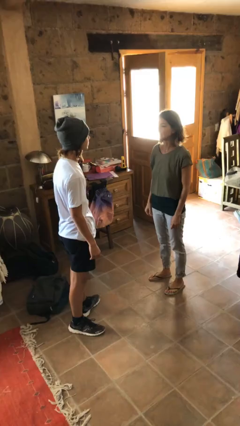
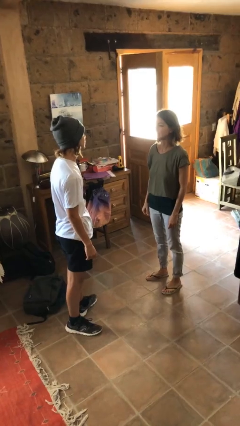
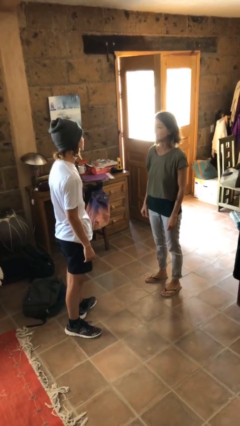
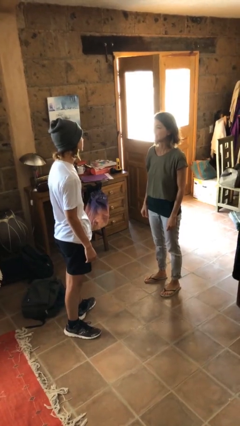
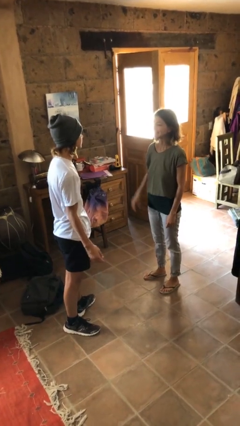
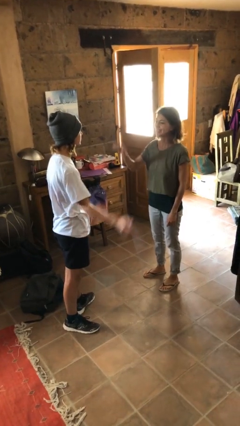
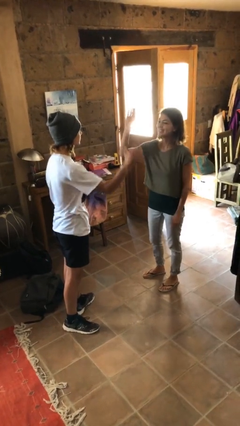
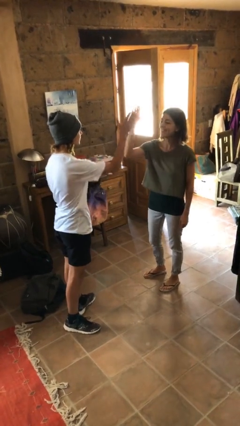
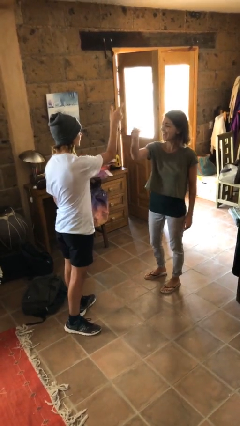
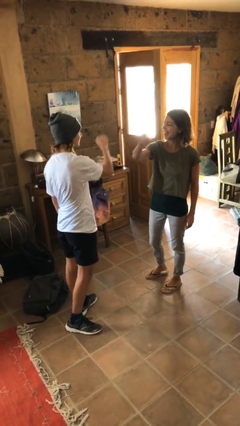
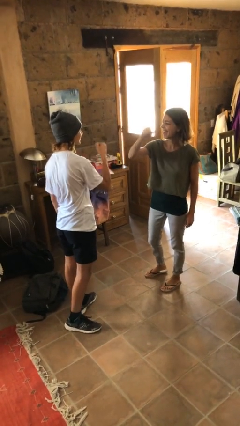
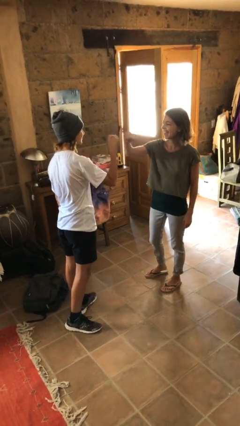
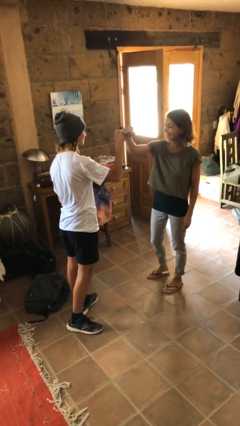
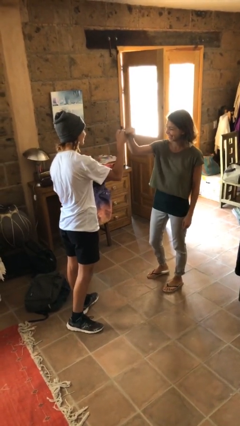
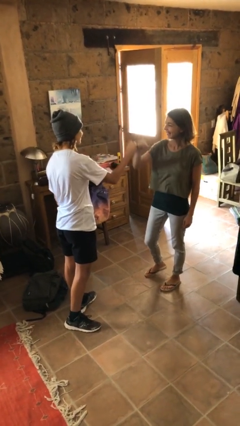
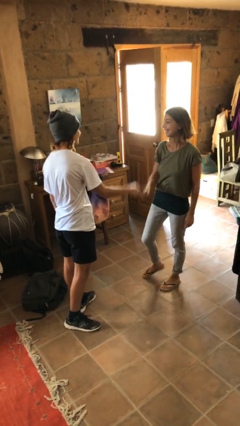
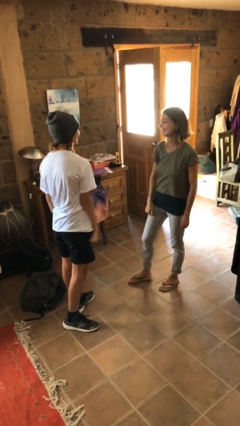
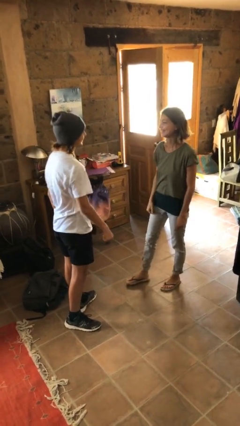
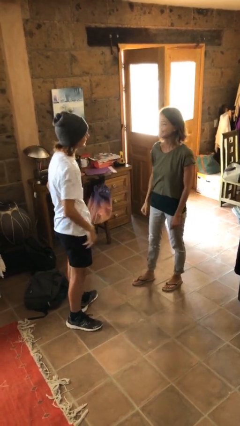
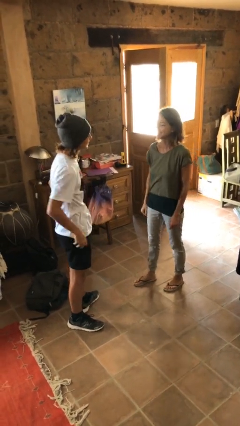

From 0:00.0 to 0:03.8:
person highfives hand

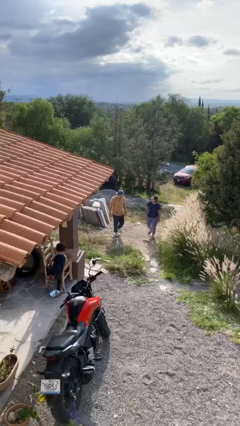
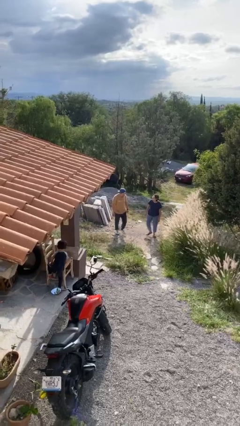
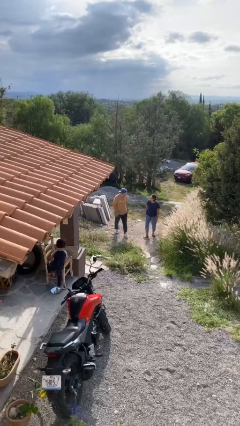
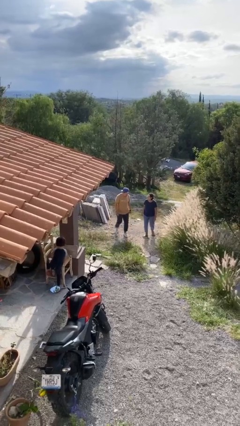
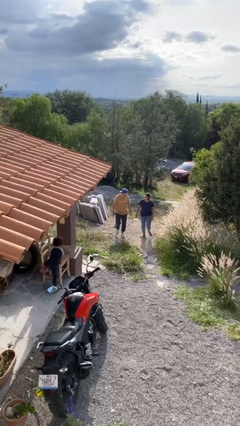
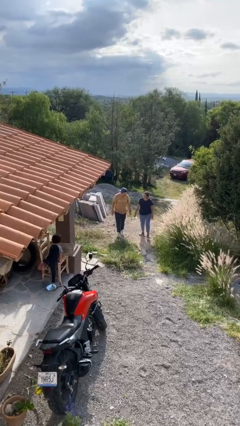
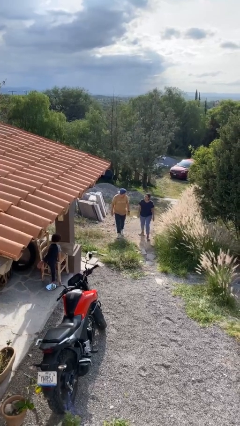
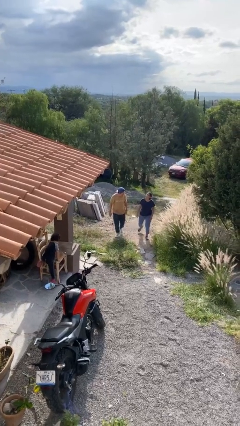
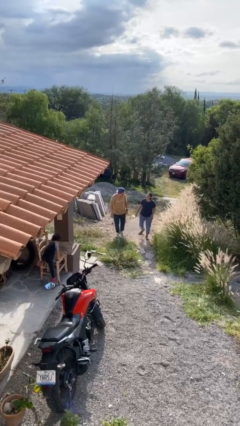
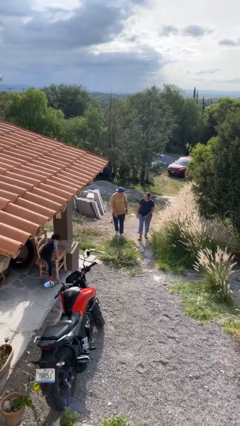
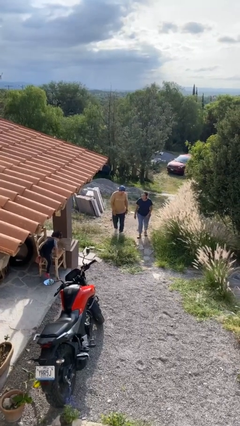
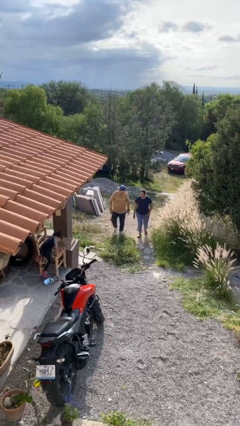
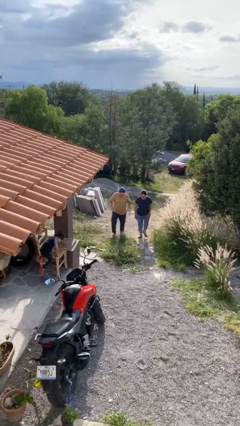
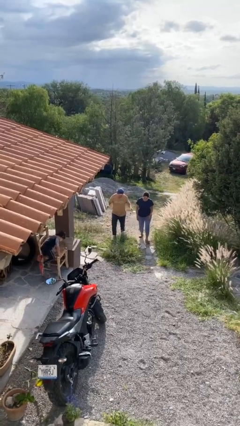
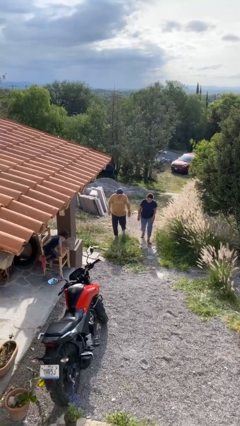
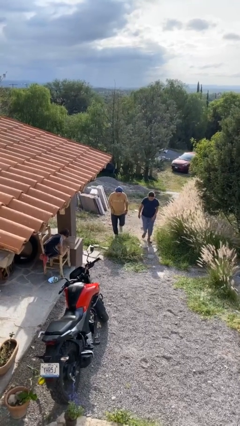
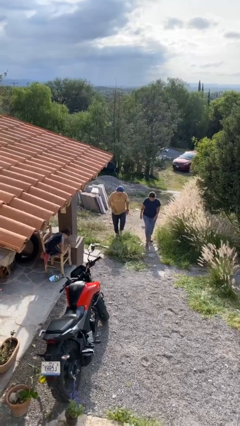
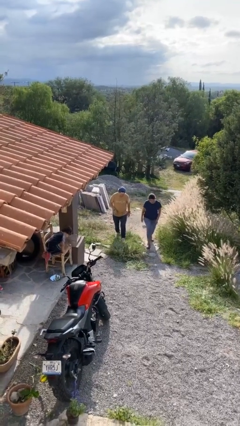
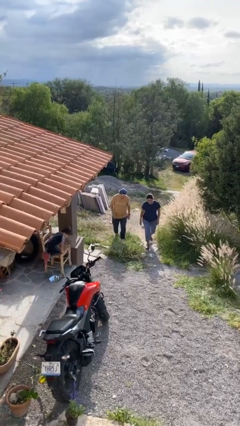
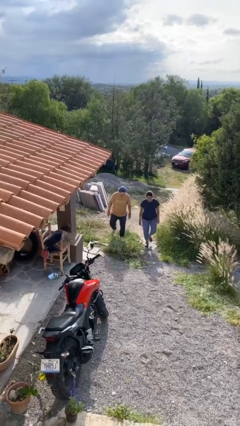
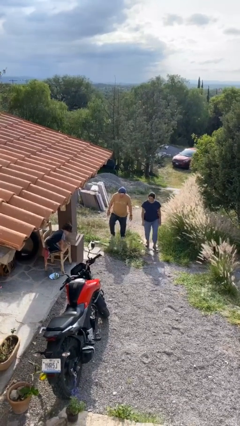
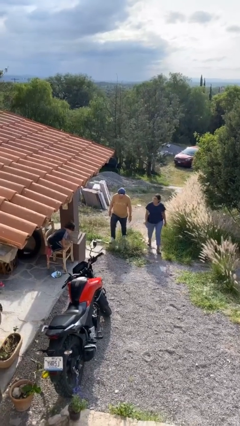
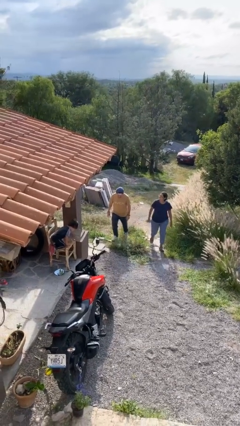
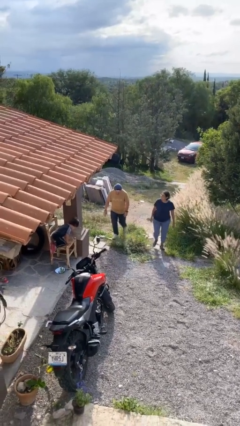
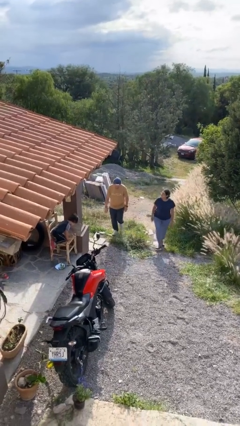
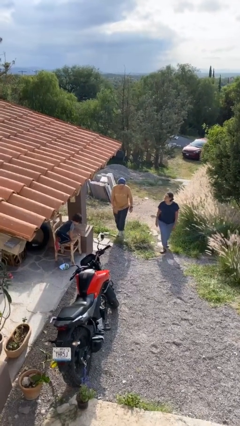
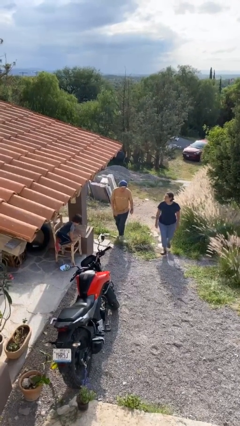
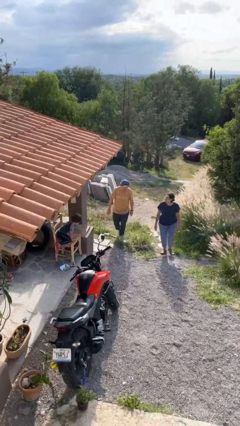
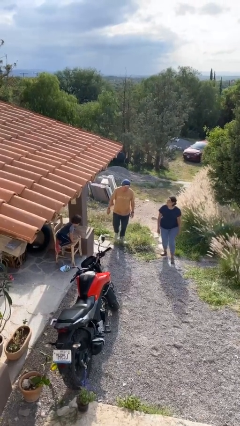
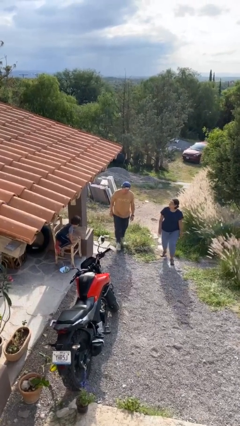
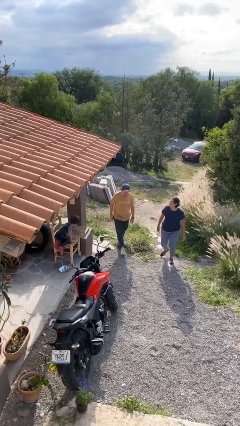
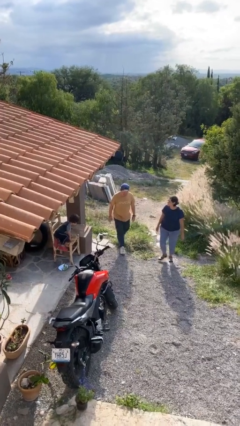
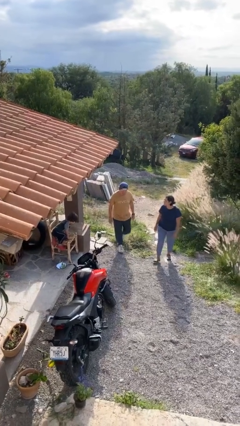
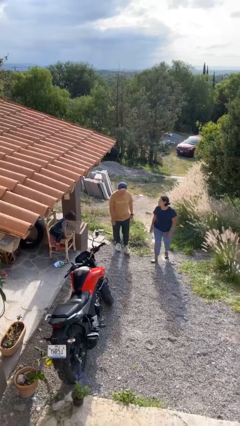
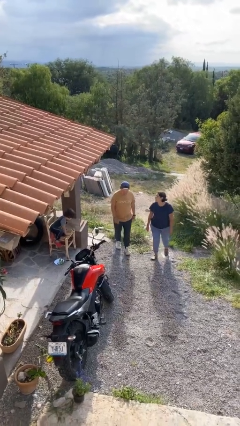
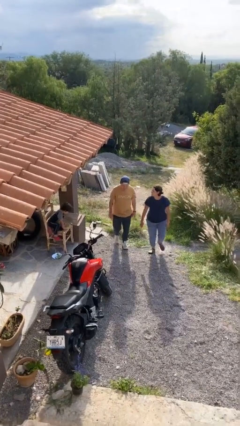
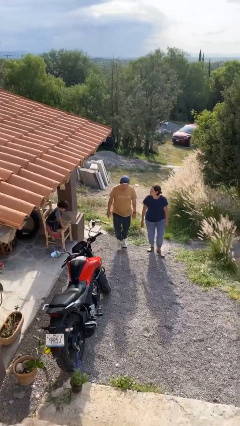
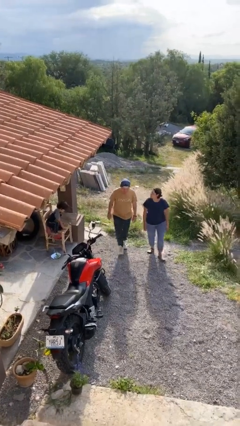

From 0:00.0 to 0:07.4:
person talks to person

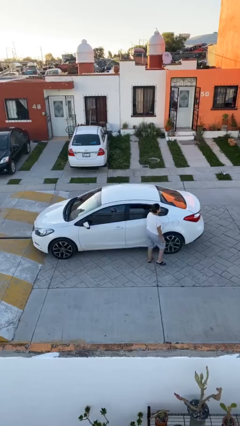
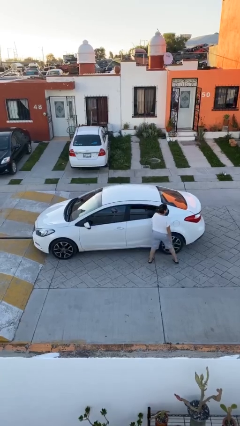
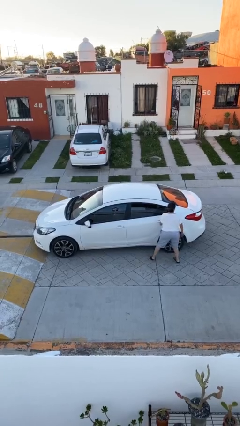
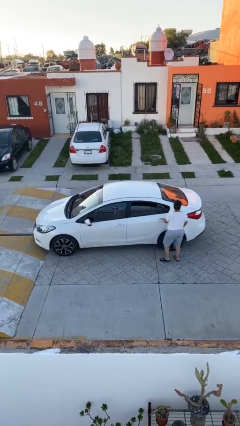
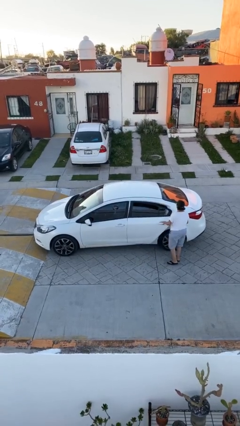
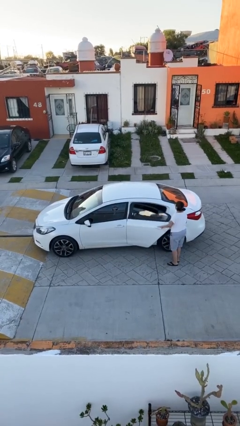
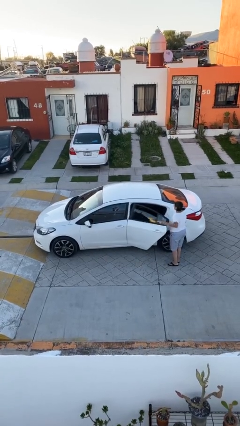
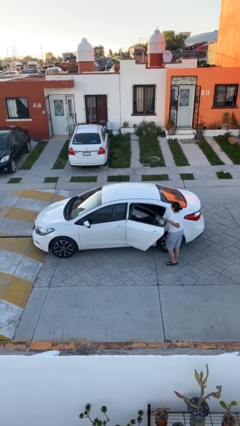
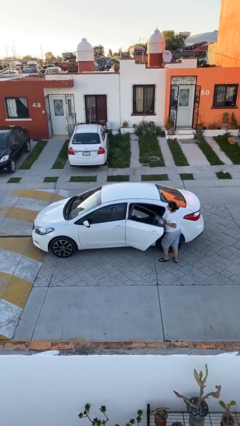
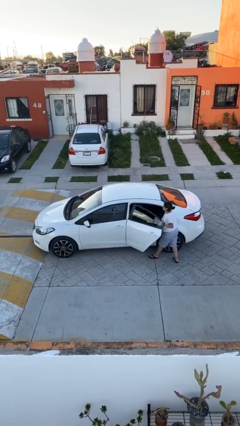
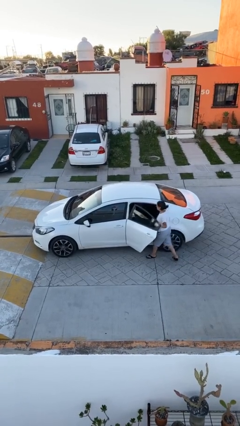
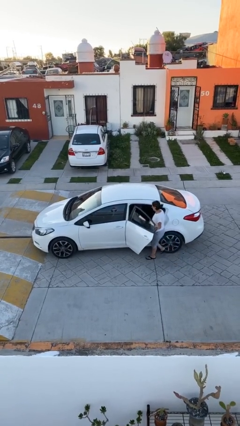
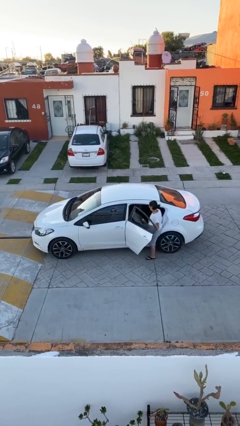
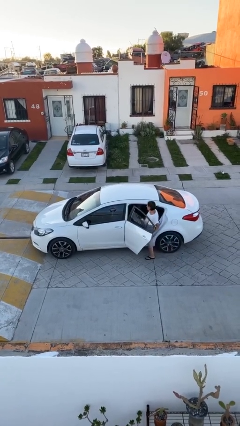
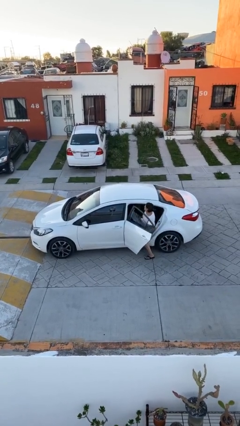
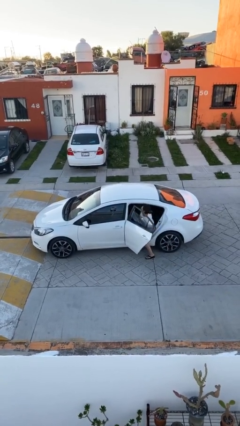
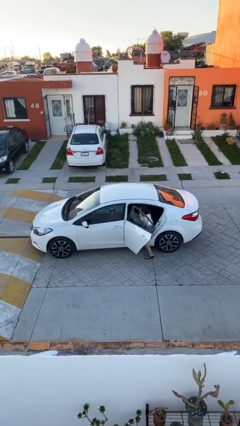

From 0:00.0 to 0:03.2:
car picks up person

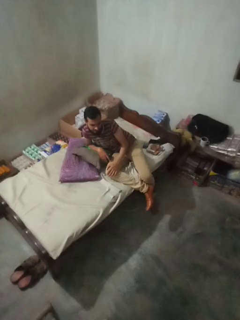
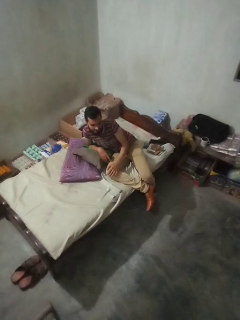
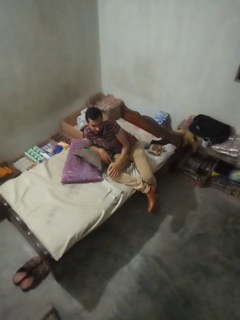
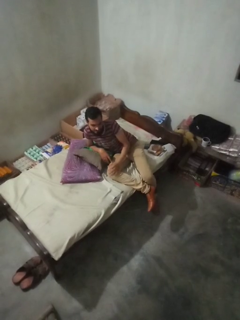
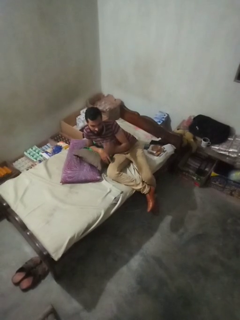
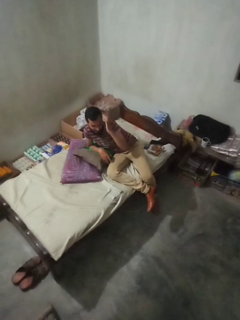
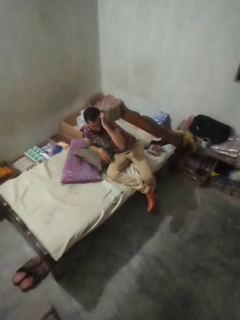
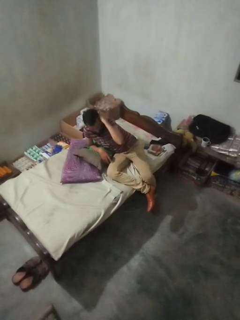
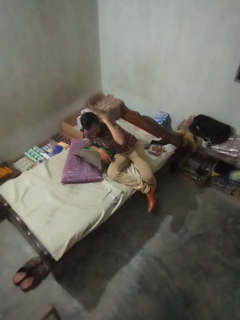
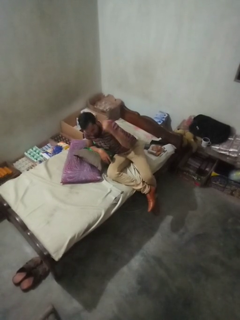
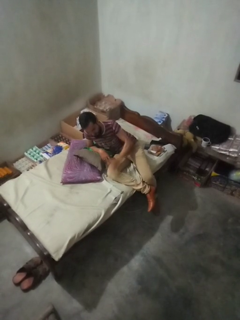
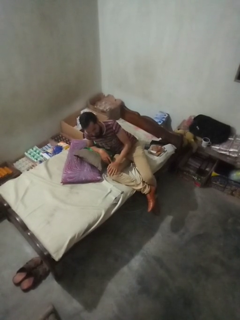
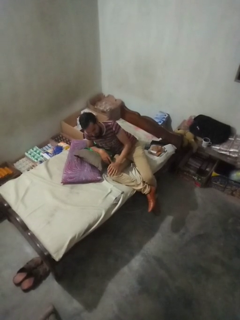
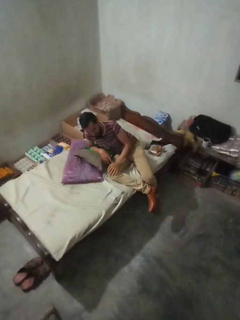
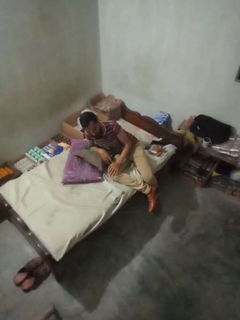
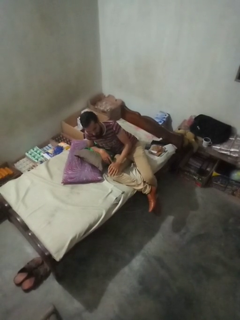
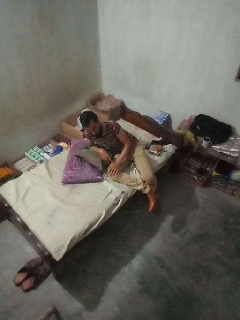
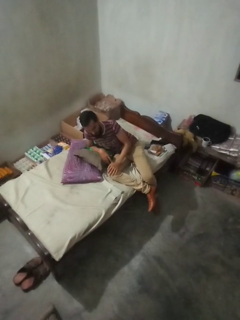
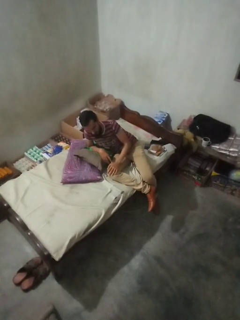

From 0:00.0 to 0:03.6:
person strokes hair

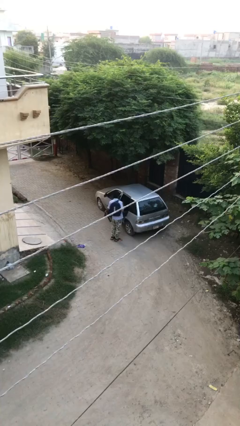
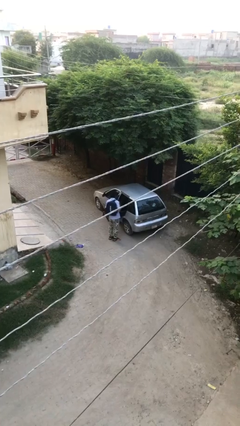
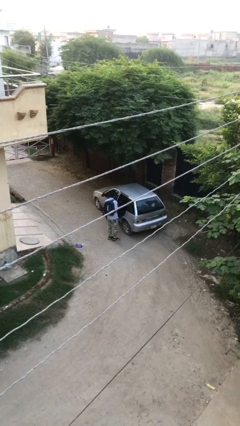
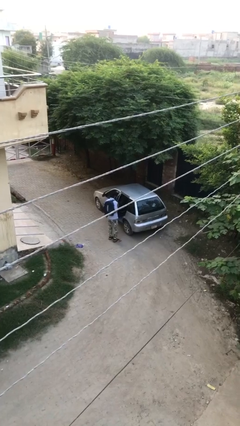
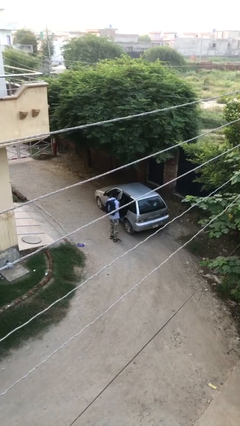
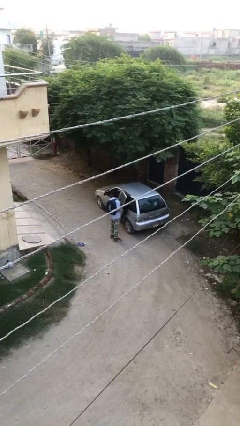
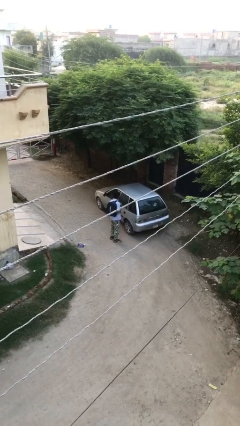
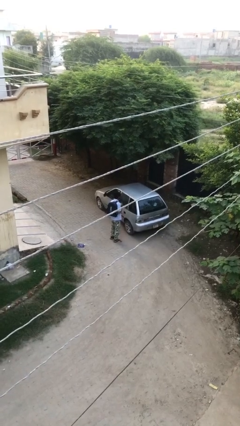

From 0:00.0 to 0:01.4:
person closes car door
